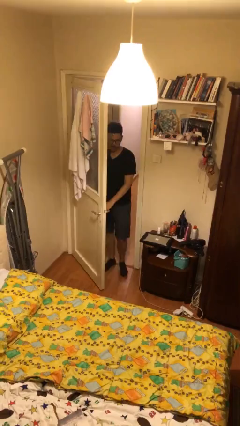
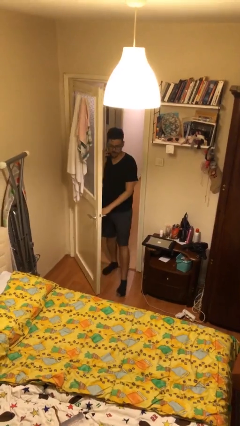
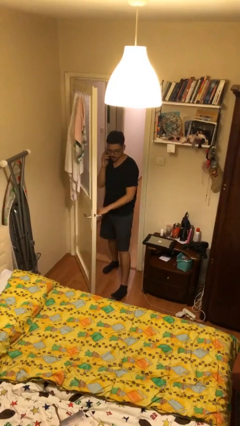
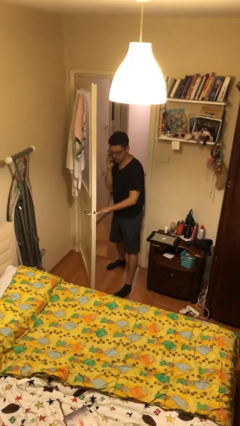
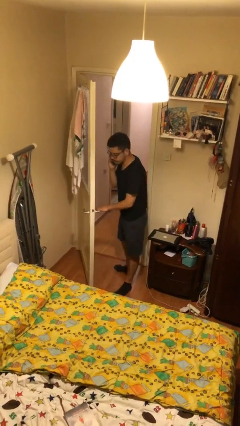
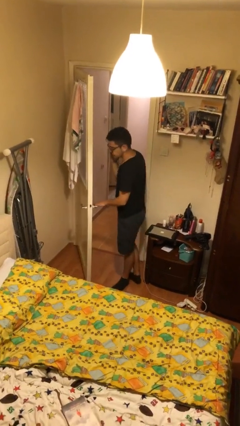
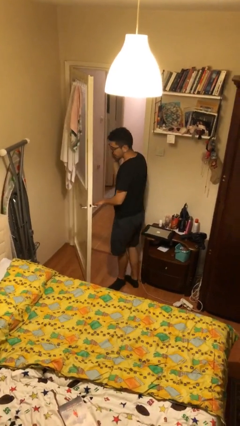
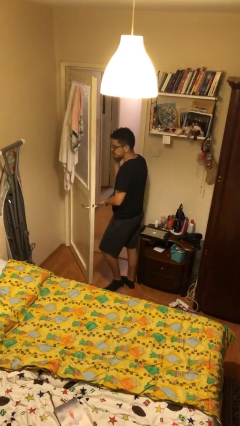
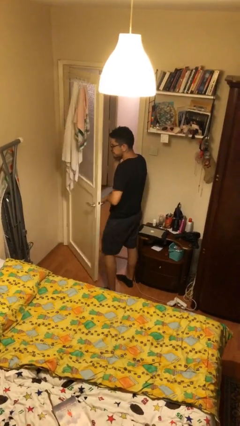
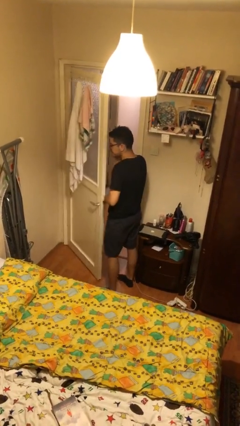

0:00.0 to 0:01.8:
person enters scene through structure

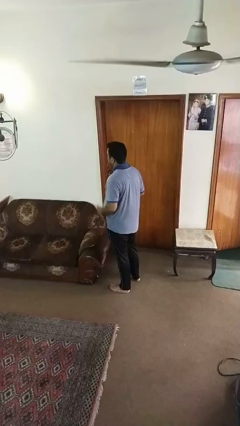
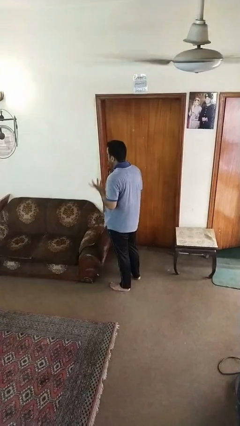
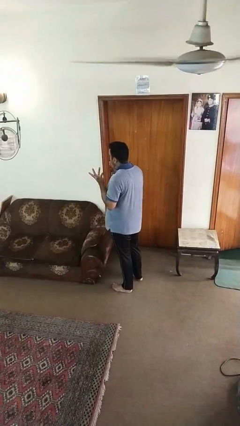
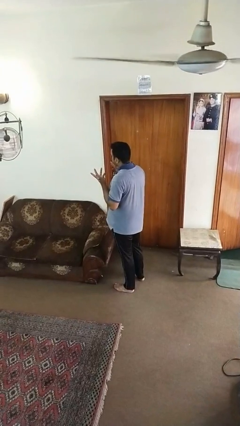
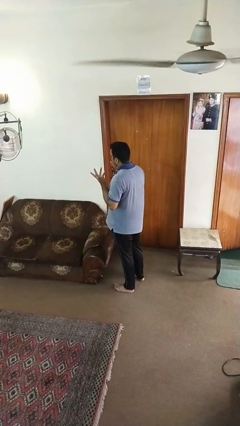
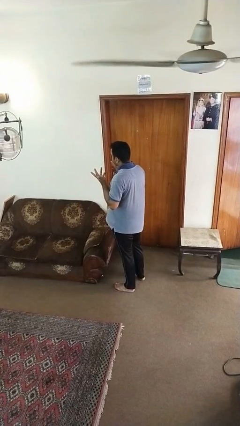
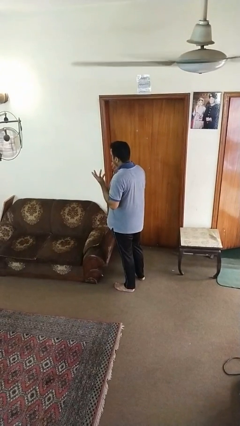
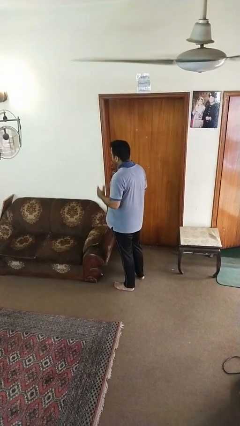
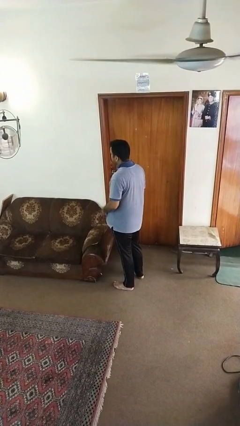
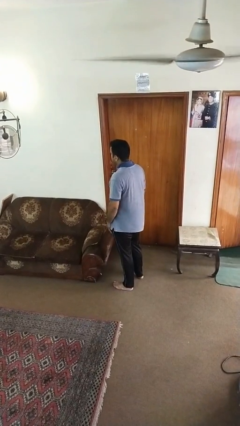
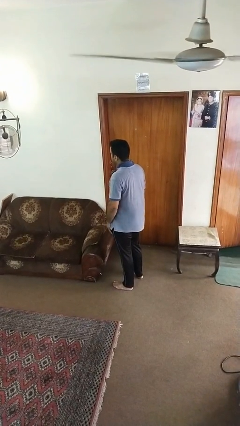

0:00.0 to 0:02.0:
person shrugs

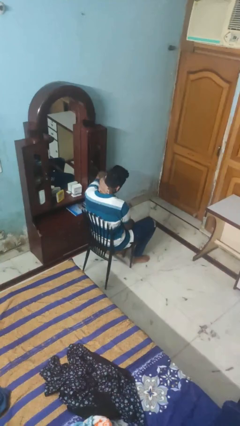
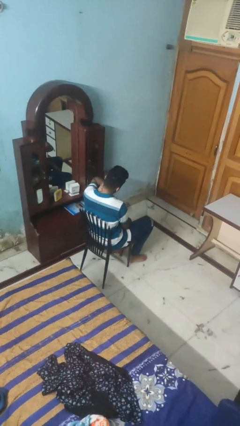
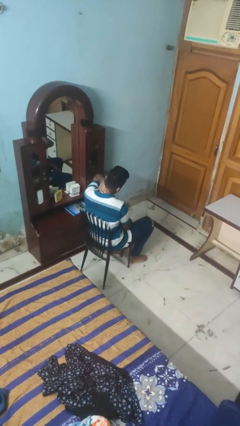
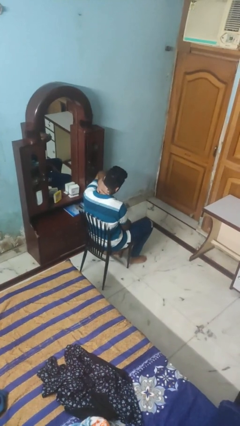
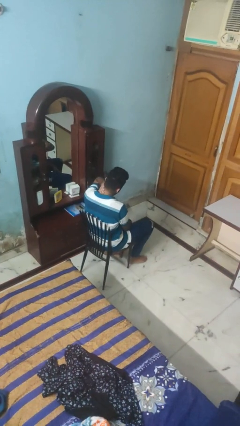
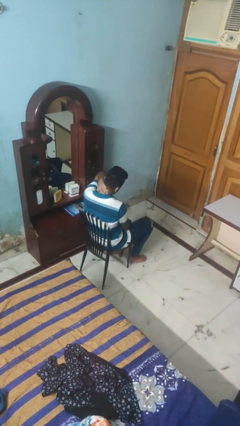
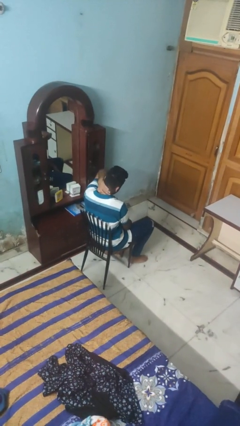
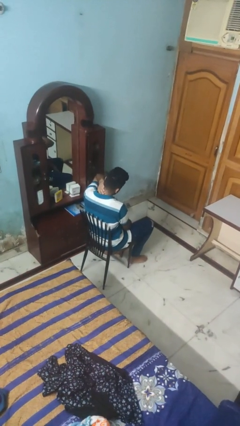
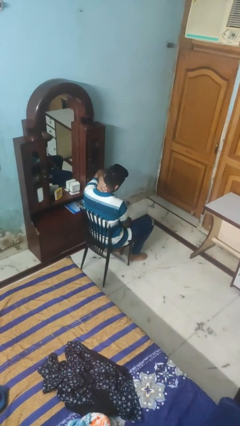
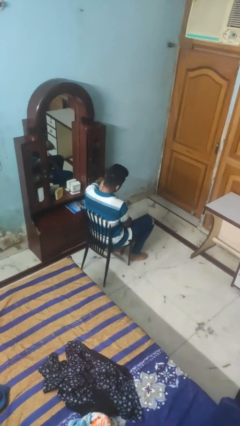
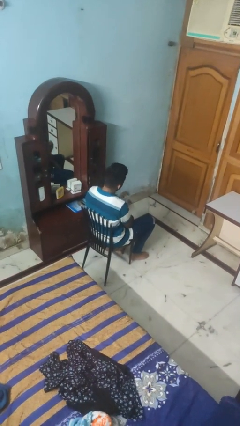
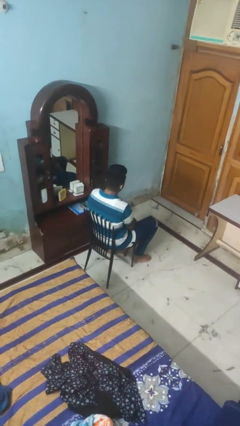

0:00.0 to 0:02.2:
person rubs neck

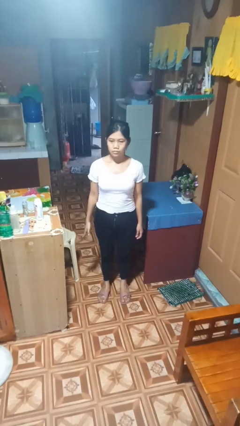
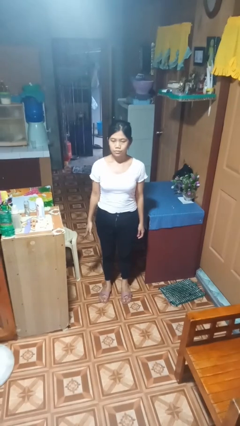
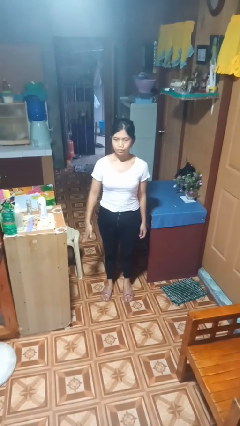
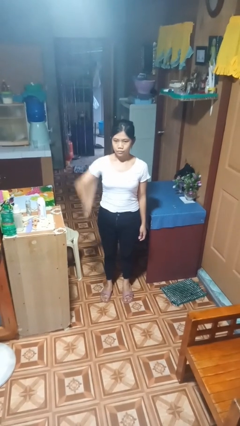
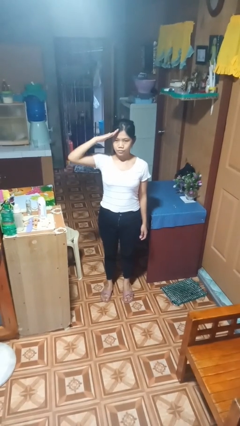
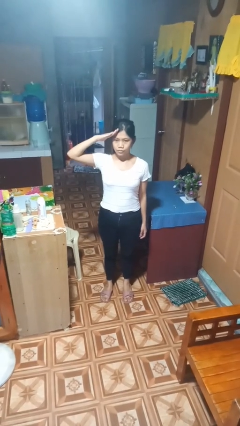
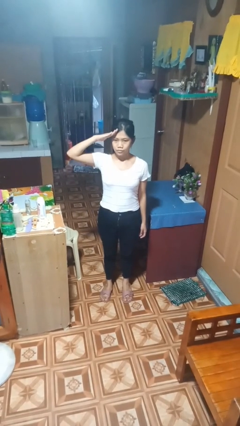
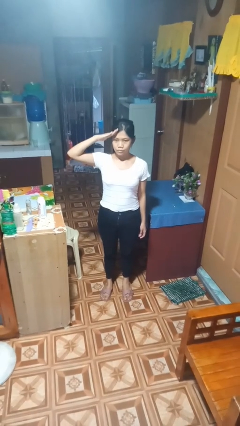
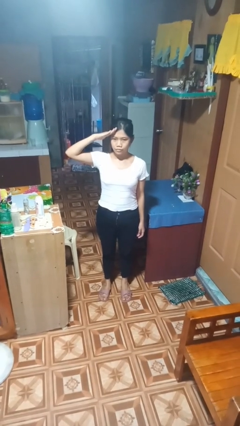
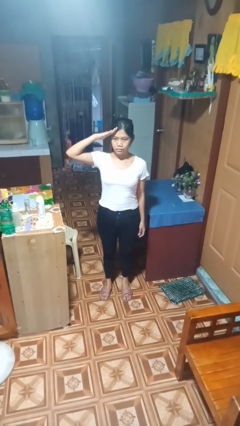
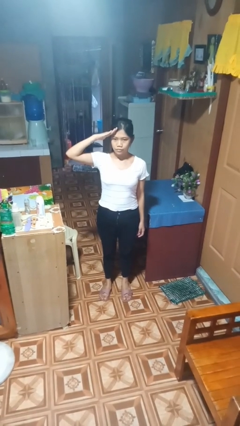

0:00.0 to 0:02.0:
person salutes

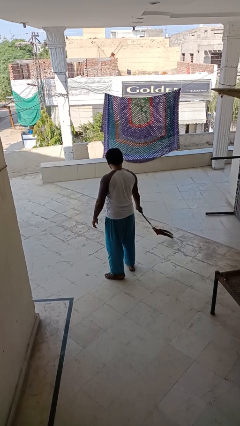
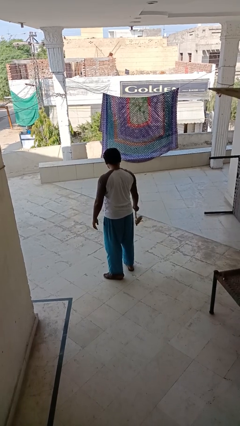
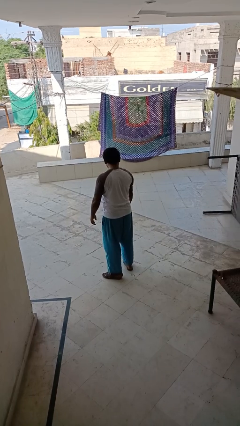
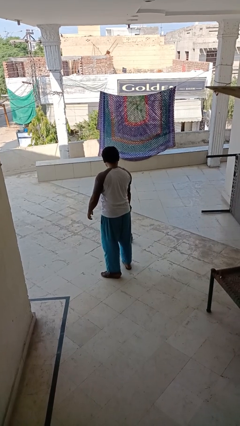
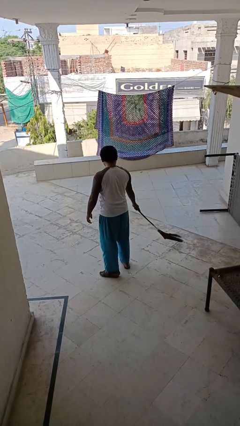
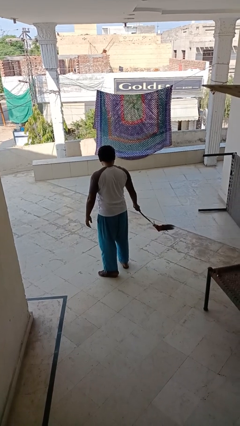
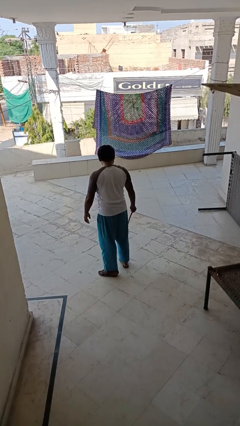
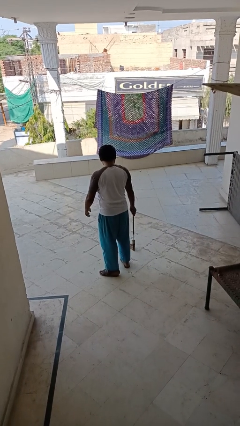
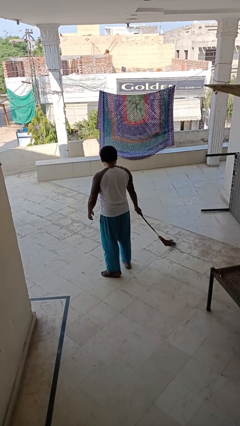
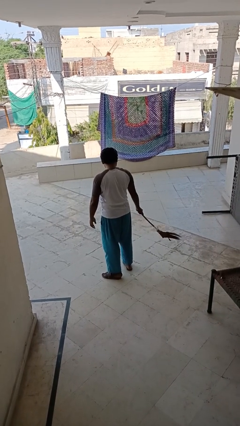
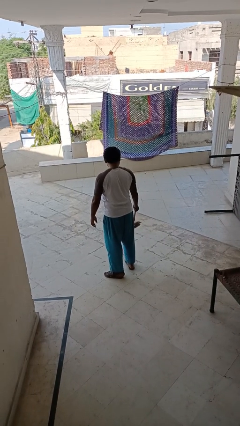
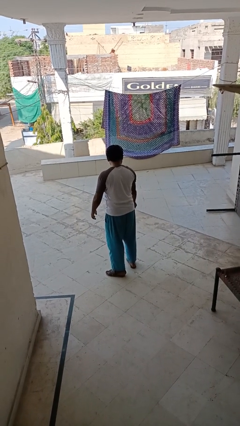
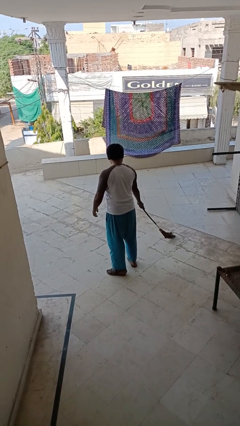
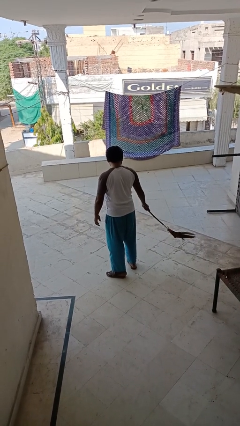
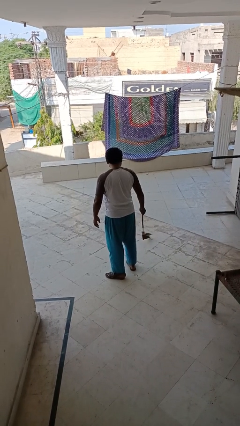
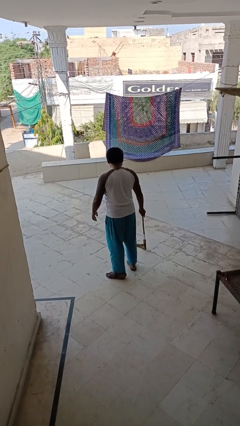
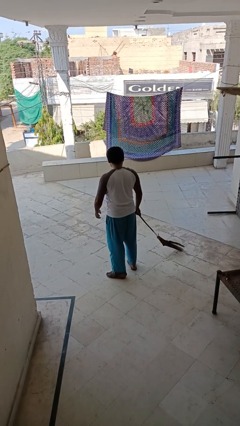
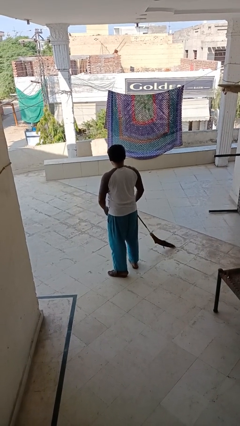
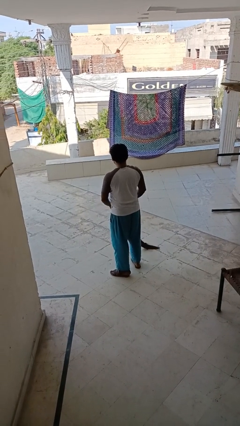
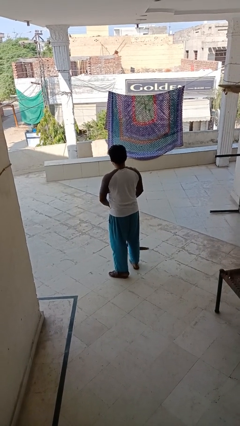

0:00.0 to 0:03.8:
person sweeps floor

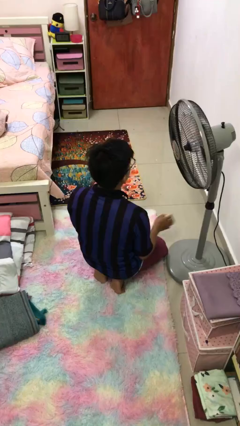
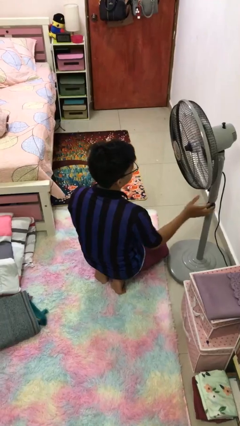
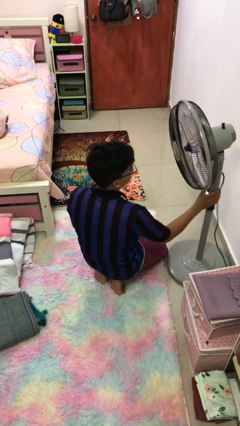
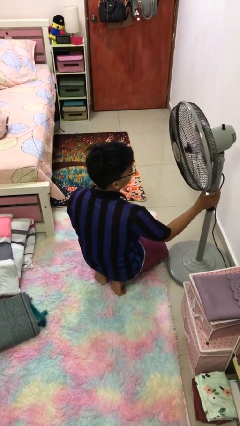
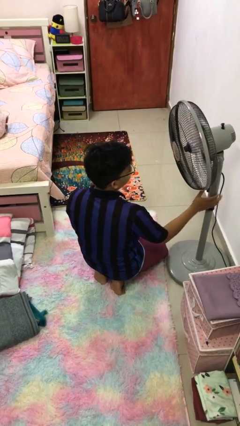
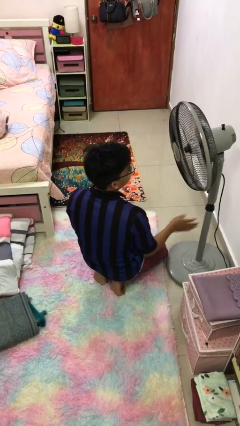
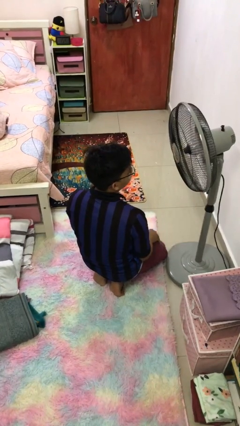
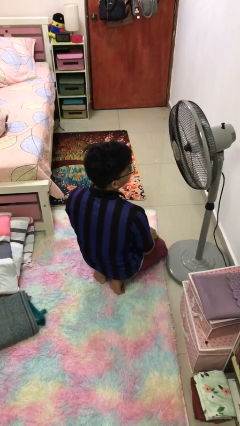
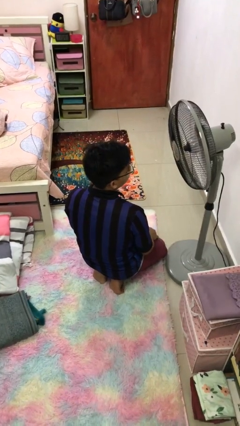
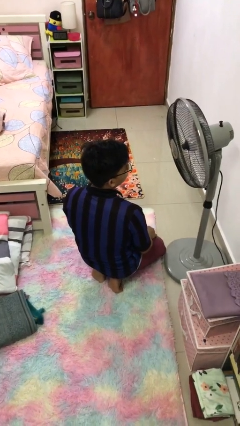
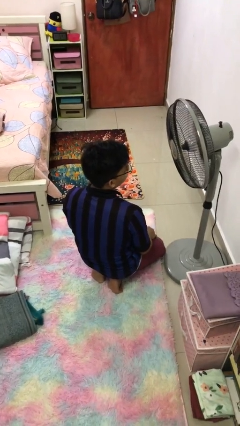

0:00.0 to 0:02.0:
person turns on fan

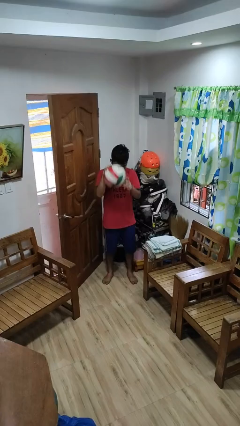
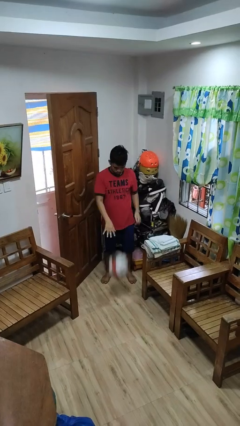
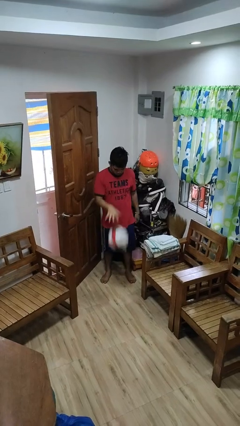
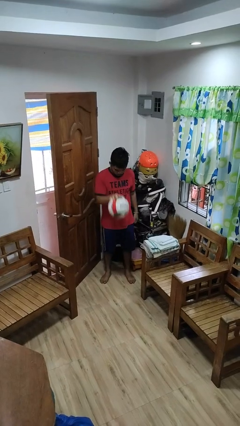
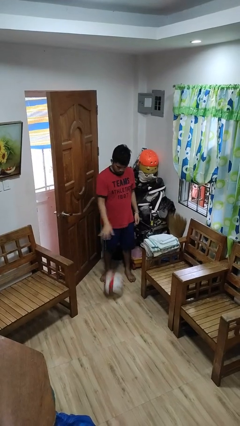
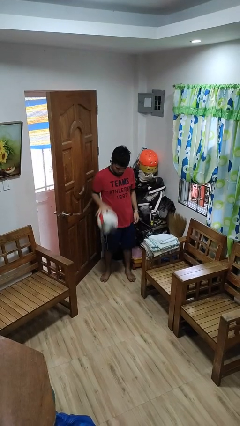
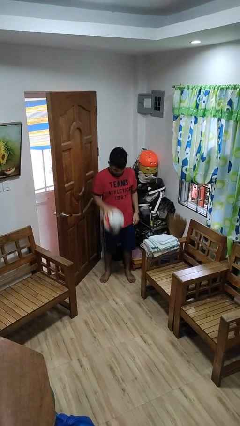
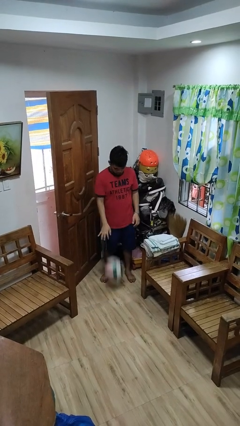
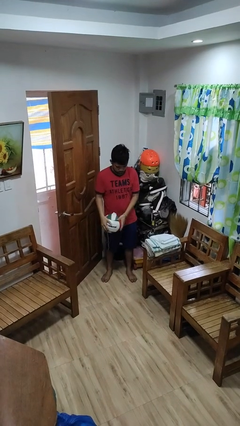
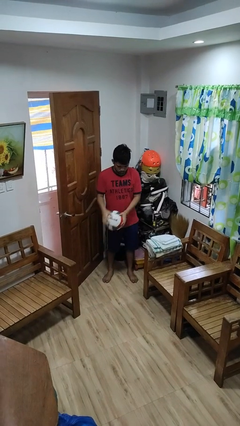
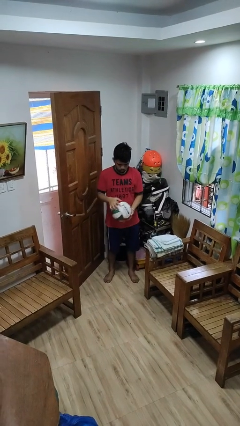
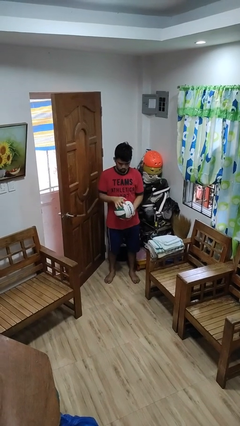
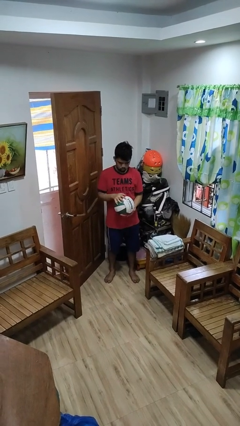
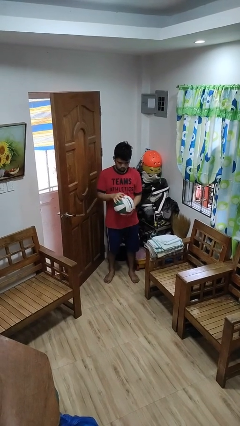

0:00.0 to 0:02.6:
person bounces ball on floor

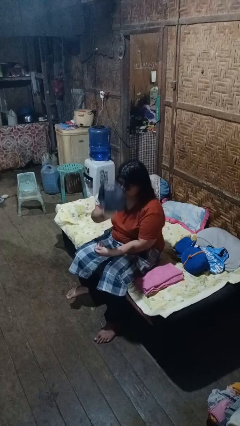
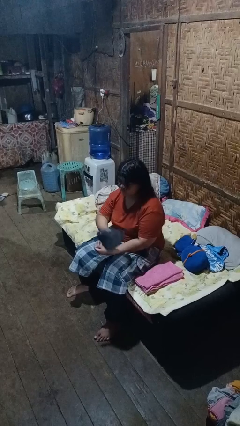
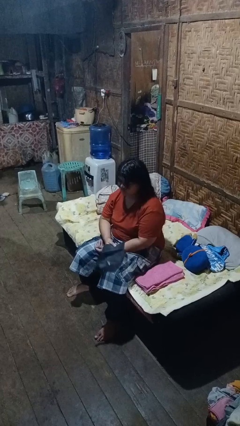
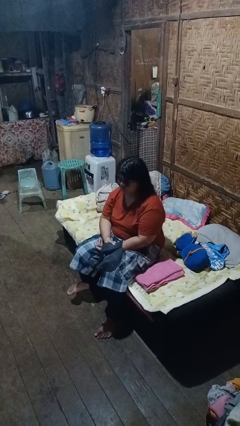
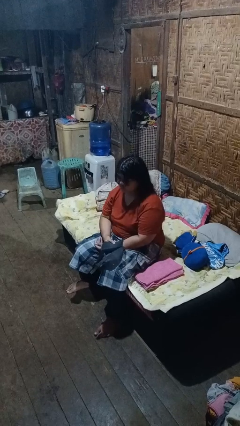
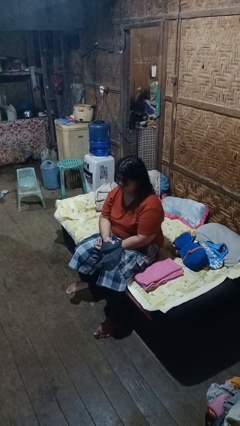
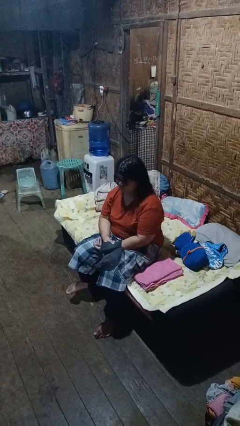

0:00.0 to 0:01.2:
person takes off hat
